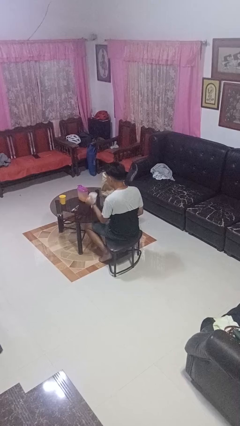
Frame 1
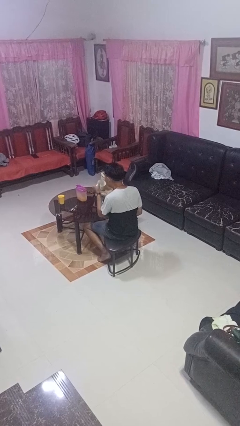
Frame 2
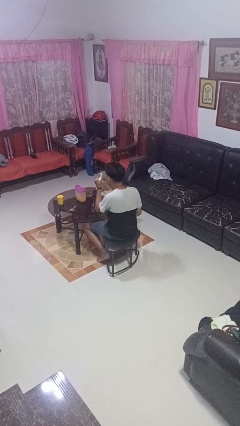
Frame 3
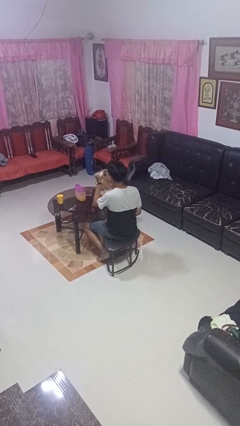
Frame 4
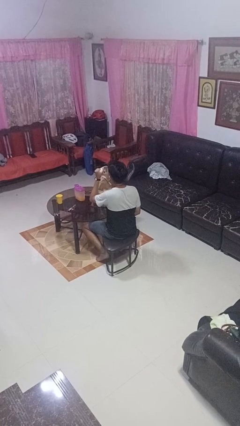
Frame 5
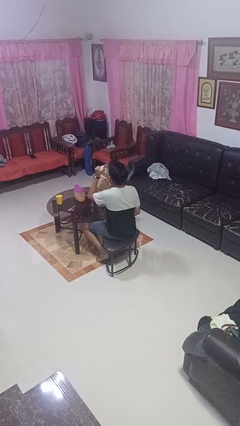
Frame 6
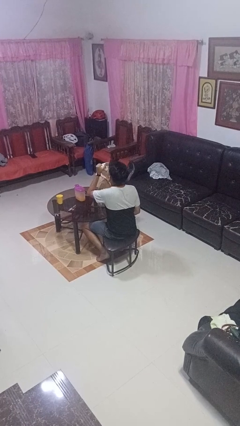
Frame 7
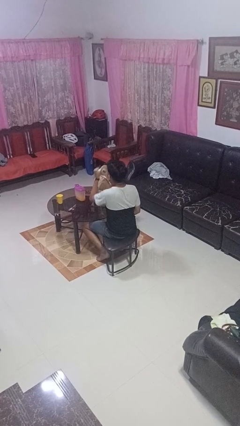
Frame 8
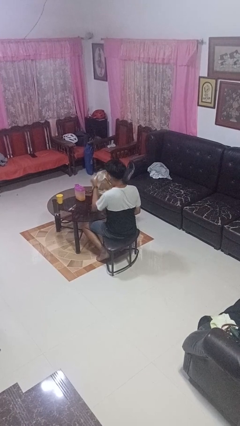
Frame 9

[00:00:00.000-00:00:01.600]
person drinks from mug

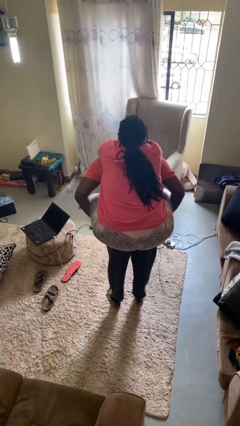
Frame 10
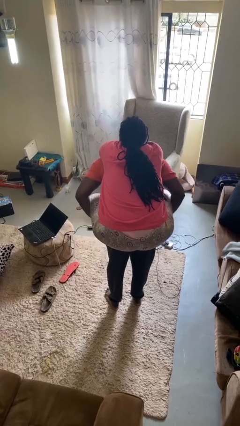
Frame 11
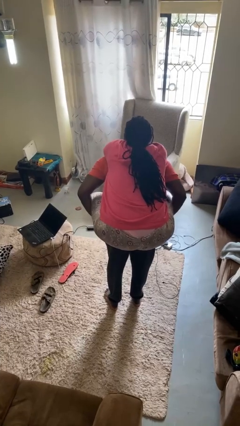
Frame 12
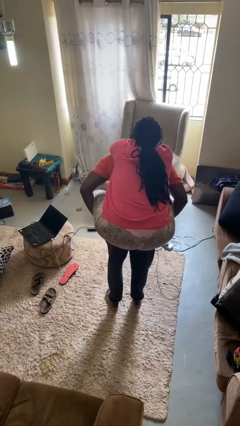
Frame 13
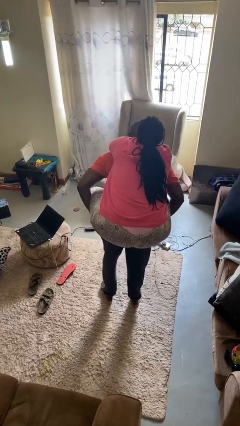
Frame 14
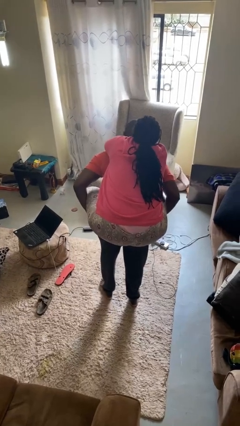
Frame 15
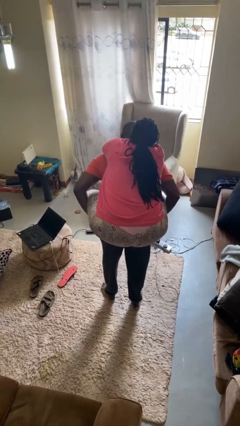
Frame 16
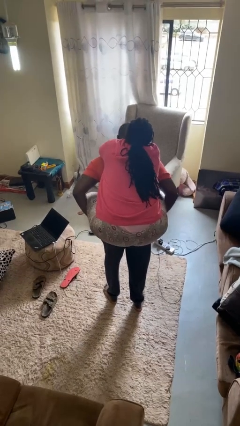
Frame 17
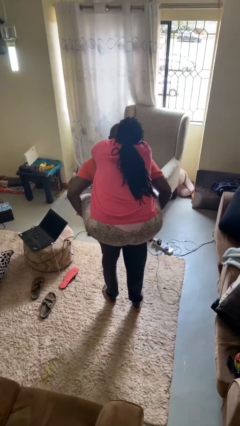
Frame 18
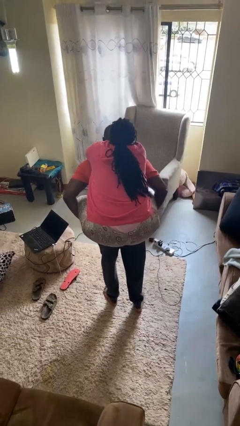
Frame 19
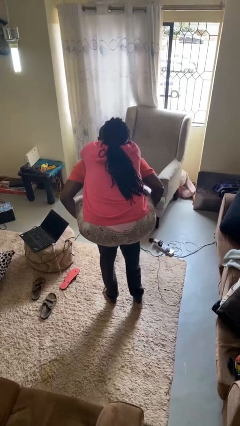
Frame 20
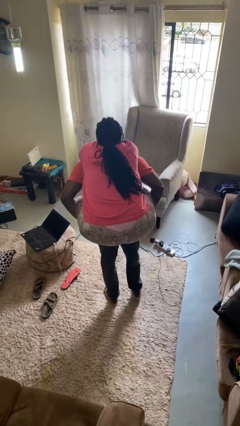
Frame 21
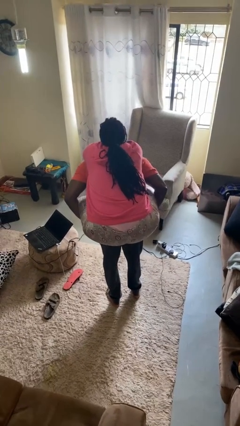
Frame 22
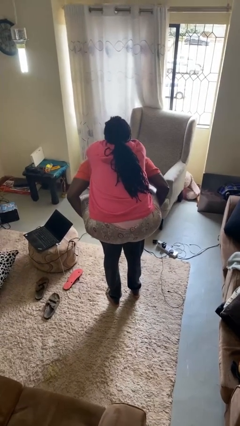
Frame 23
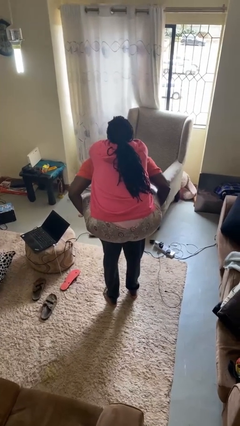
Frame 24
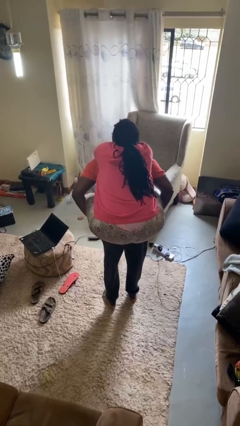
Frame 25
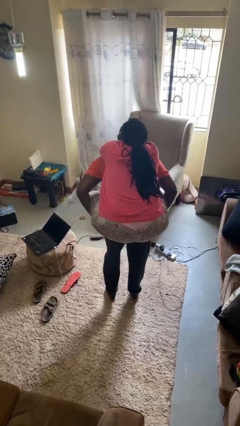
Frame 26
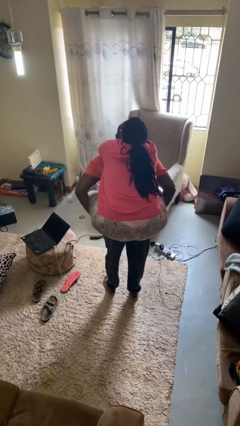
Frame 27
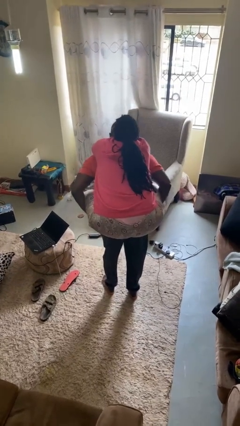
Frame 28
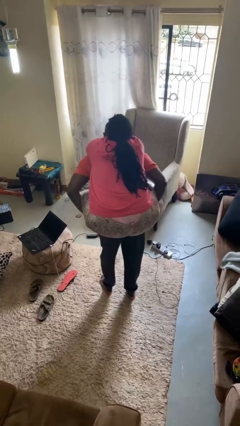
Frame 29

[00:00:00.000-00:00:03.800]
person carries person on back

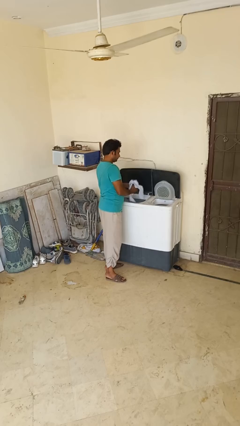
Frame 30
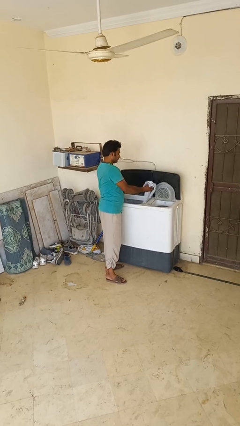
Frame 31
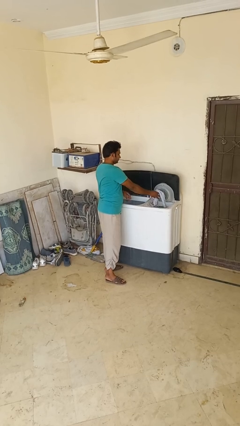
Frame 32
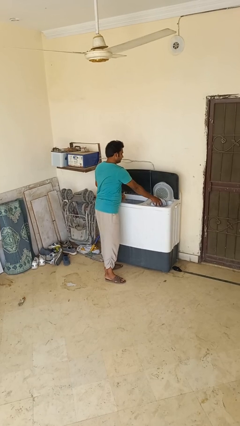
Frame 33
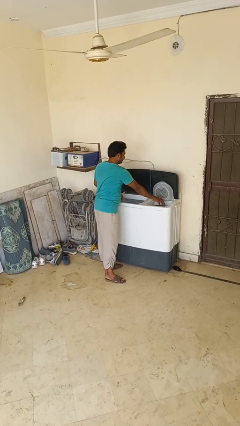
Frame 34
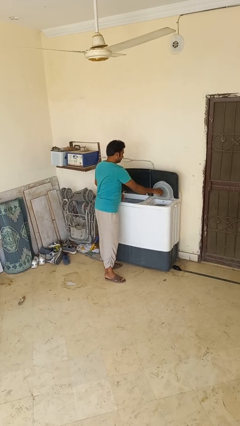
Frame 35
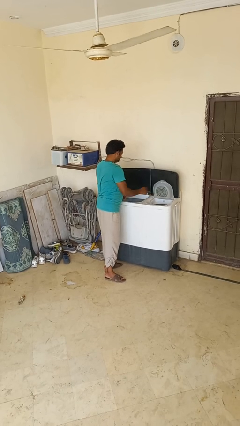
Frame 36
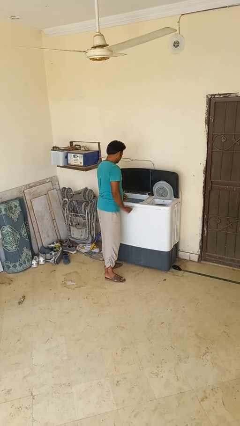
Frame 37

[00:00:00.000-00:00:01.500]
person loads dryer

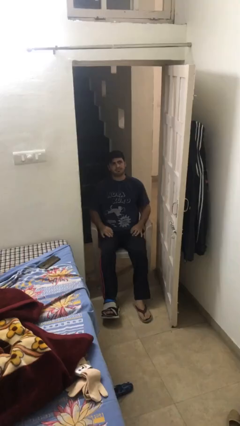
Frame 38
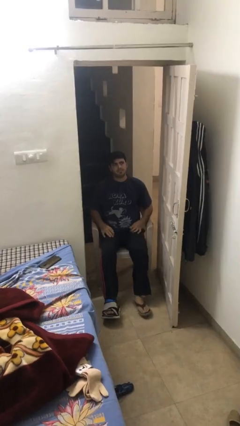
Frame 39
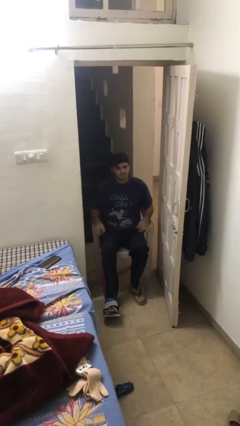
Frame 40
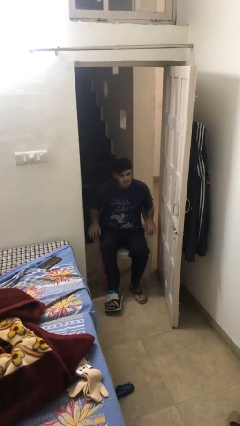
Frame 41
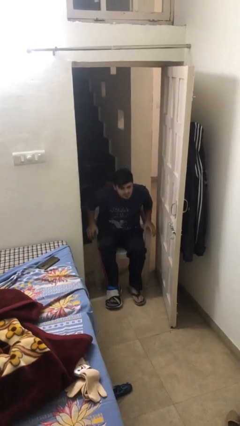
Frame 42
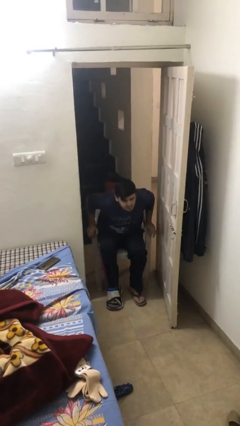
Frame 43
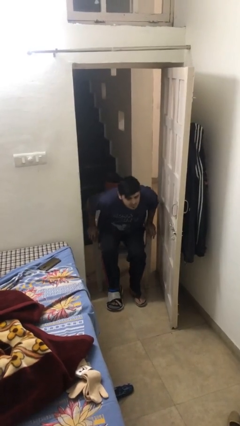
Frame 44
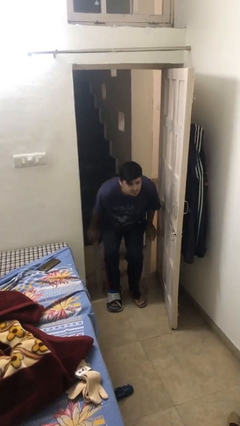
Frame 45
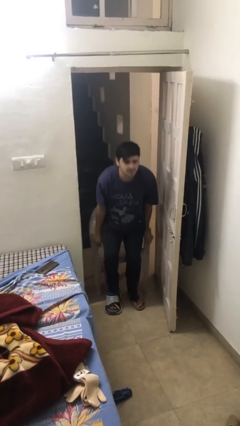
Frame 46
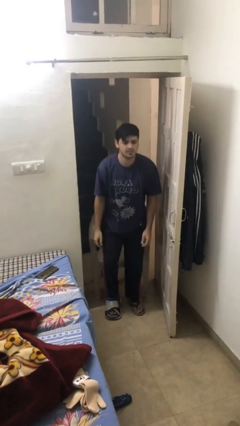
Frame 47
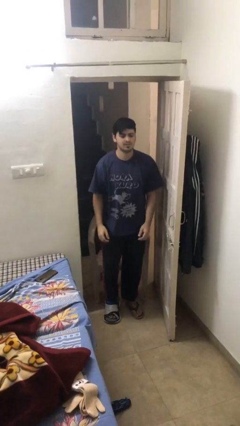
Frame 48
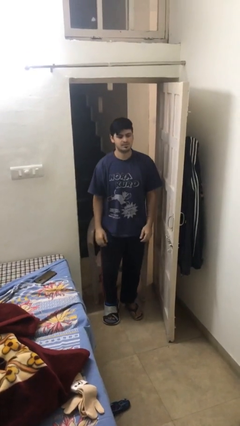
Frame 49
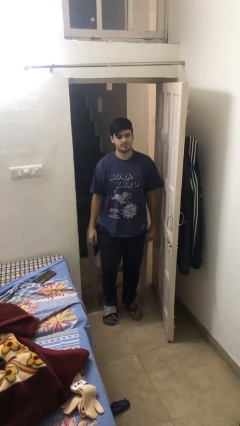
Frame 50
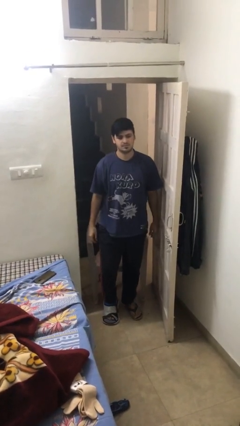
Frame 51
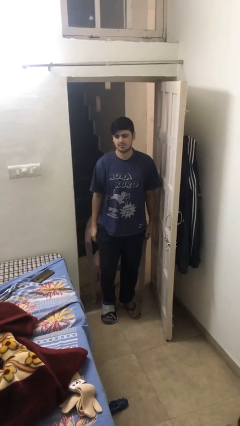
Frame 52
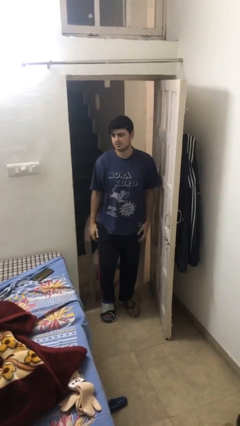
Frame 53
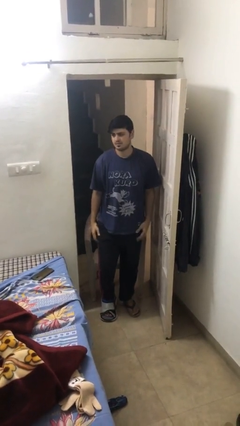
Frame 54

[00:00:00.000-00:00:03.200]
person stands up

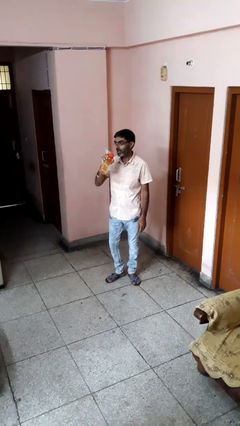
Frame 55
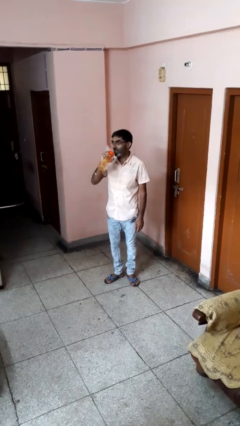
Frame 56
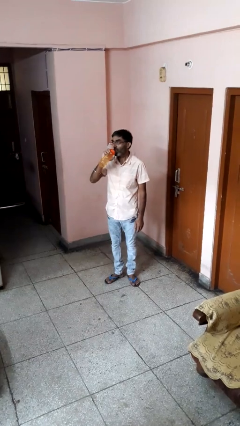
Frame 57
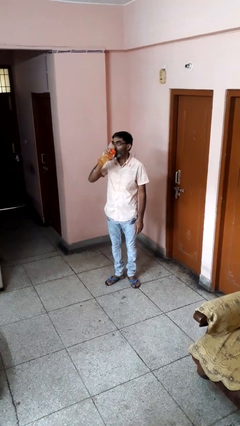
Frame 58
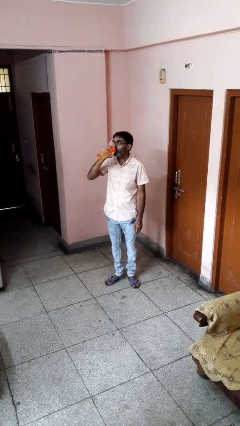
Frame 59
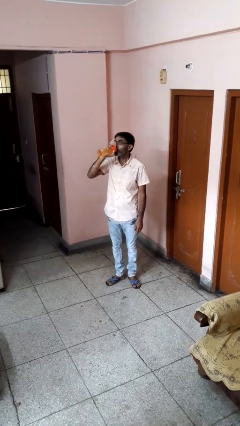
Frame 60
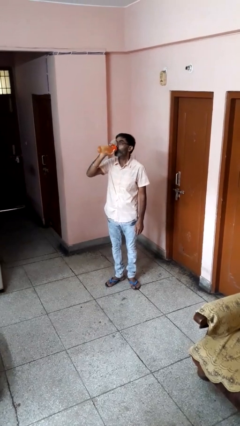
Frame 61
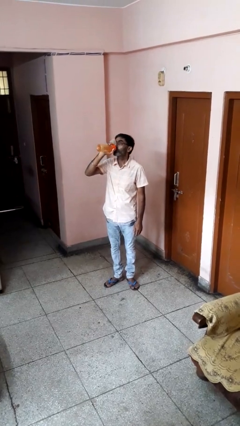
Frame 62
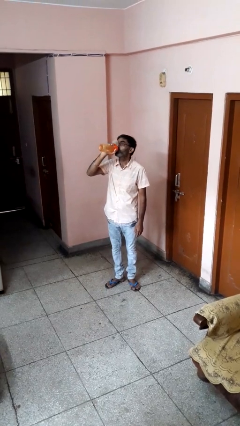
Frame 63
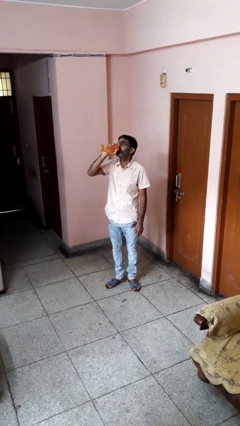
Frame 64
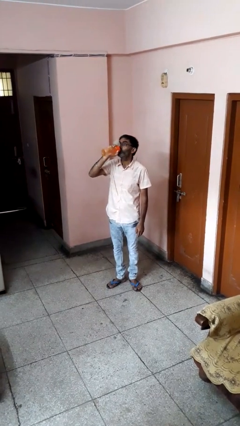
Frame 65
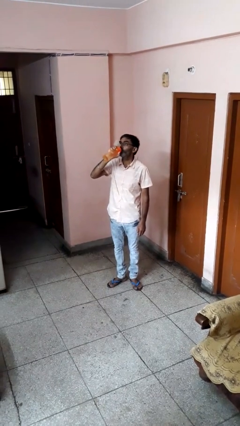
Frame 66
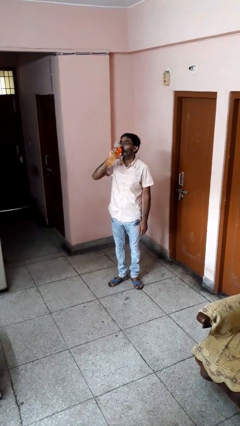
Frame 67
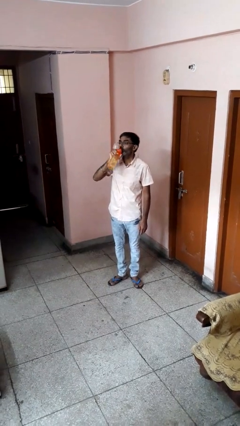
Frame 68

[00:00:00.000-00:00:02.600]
person drinks from bottle

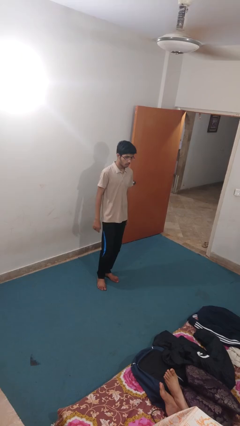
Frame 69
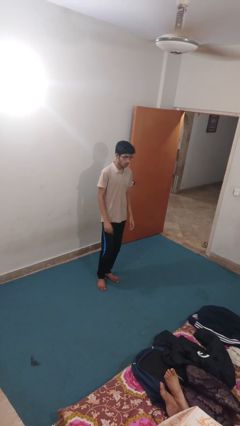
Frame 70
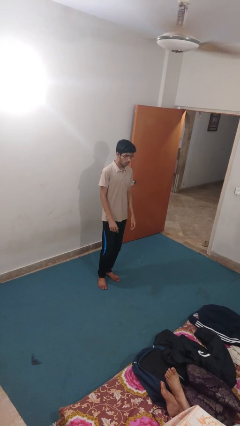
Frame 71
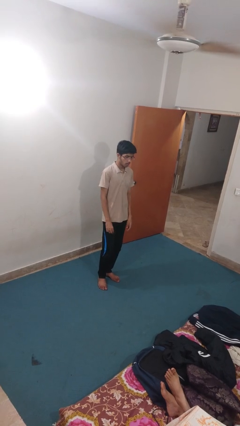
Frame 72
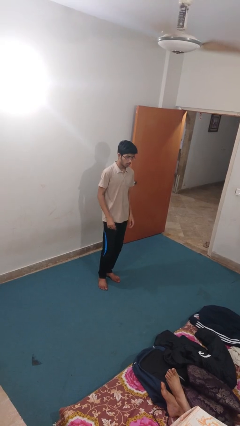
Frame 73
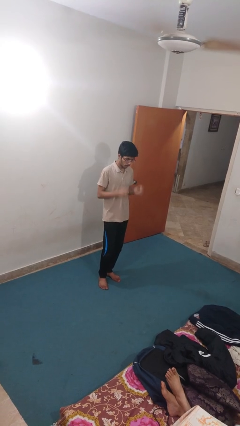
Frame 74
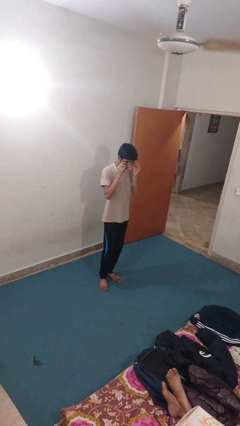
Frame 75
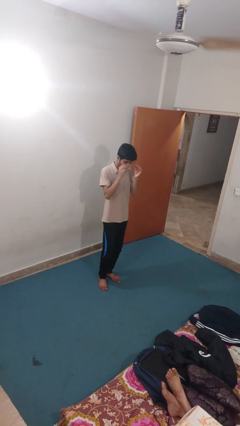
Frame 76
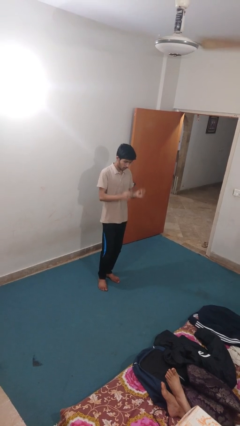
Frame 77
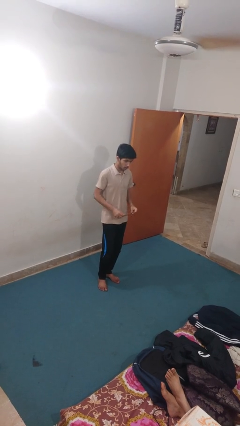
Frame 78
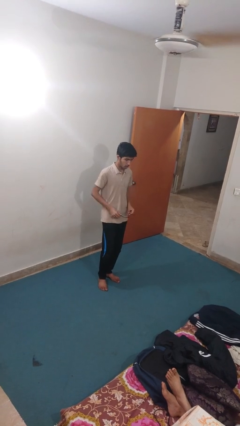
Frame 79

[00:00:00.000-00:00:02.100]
person takes off glasses

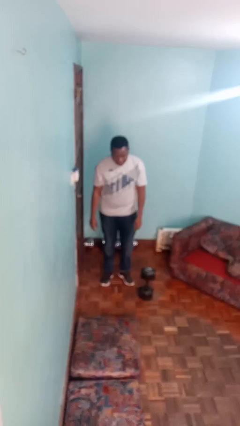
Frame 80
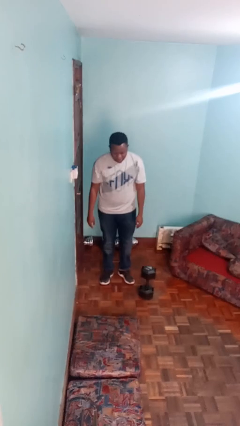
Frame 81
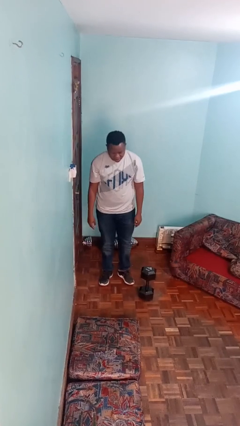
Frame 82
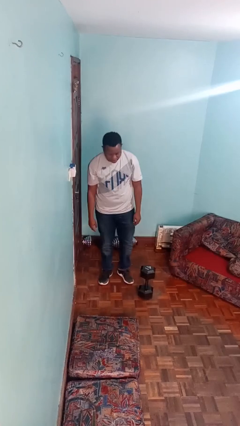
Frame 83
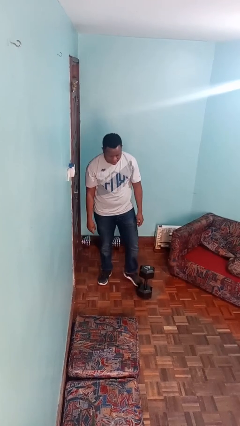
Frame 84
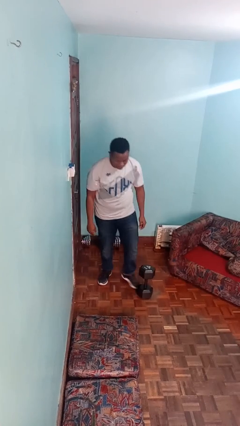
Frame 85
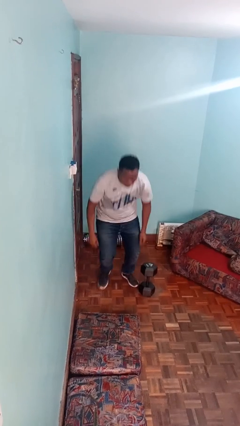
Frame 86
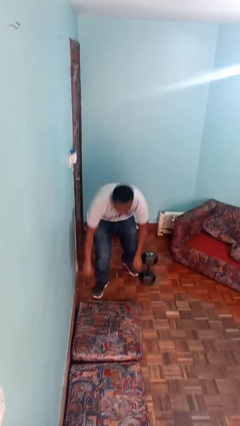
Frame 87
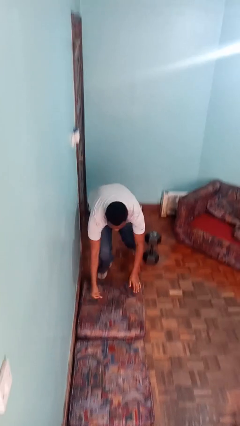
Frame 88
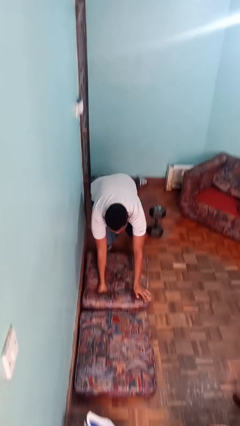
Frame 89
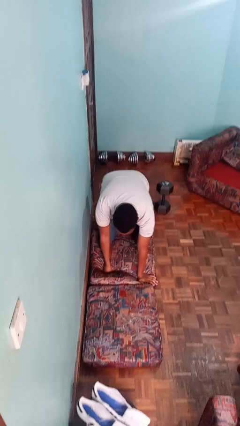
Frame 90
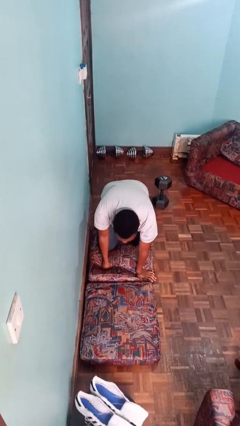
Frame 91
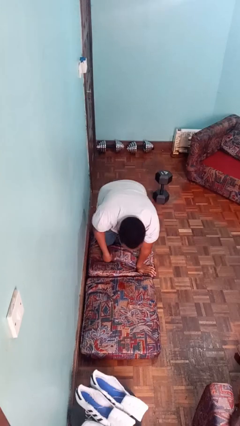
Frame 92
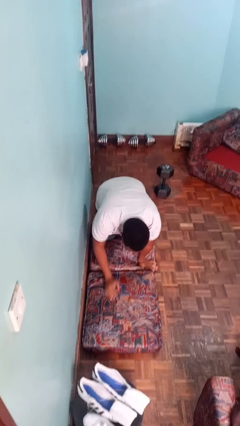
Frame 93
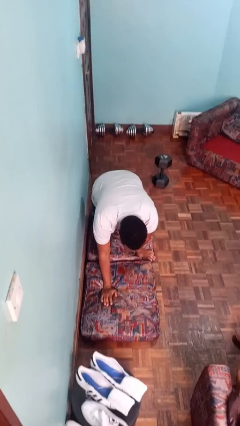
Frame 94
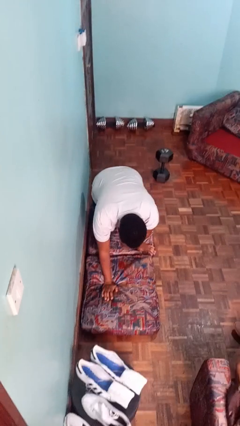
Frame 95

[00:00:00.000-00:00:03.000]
person trips on object on floor
